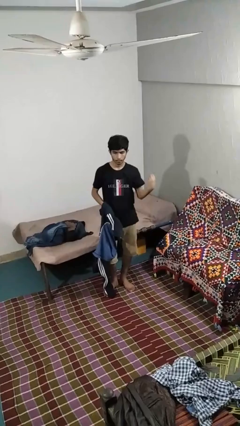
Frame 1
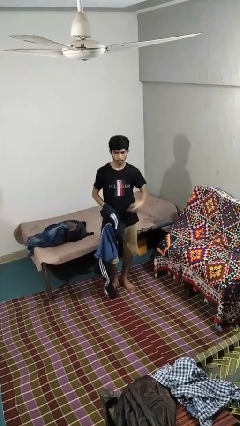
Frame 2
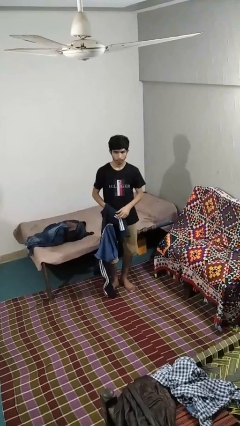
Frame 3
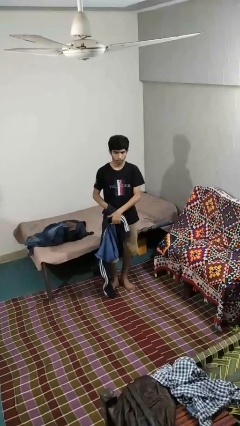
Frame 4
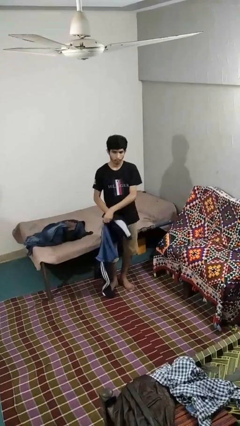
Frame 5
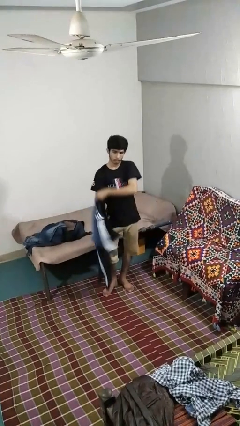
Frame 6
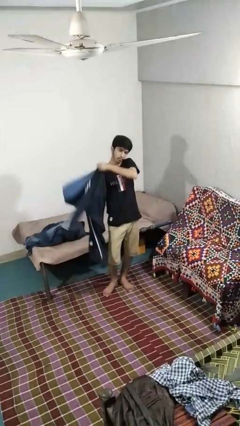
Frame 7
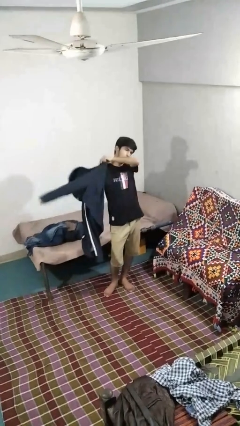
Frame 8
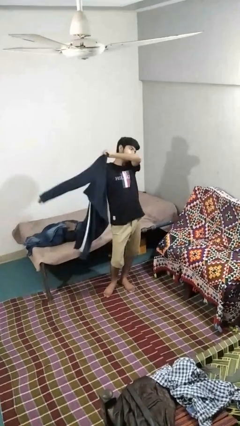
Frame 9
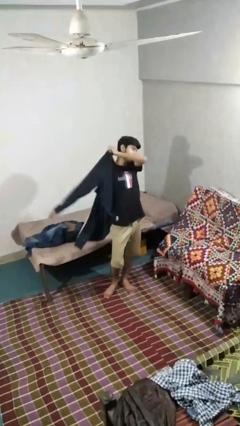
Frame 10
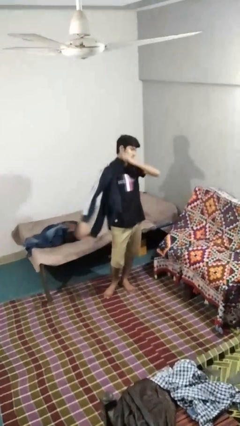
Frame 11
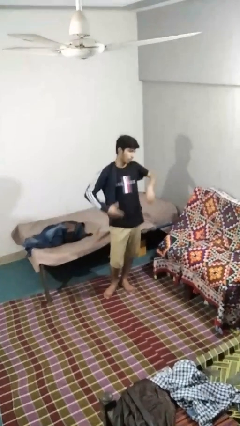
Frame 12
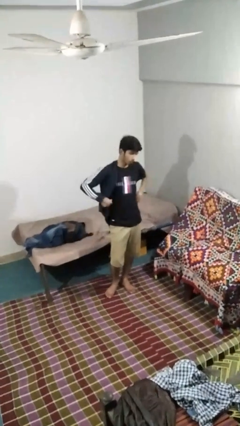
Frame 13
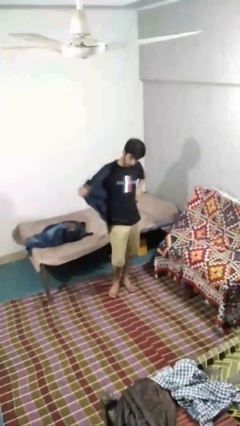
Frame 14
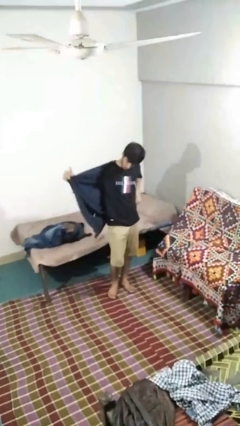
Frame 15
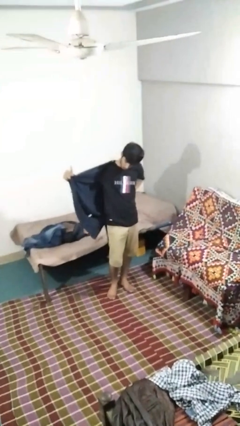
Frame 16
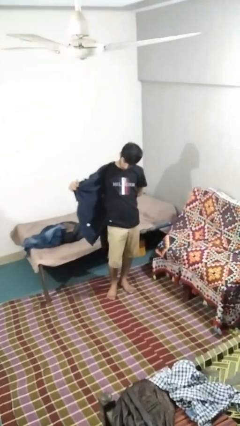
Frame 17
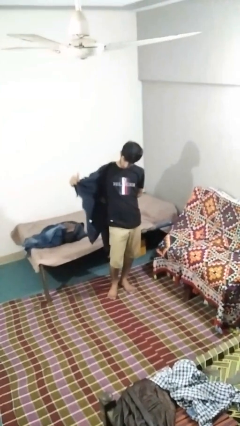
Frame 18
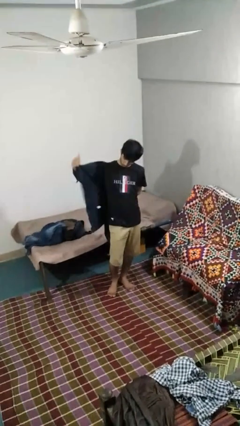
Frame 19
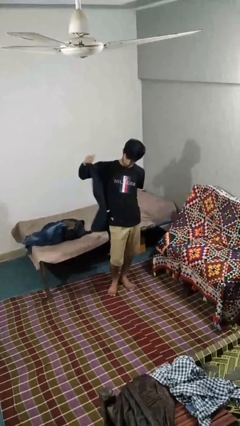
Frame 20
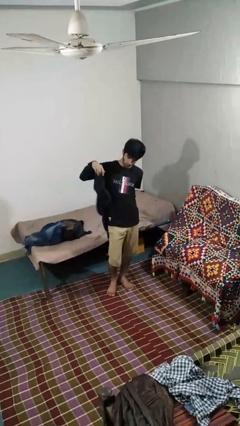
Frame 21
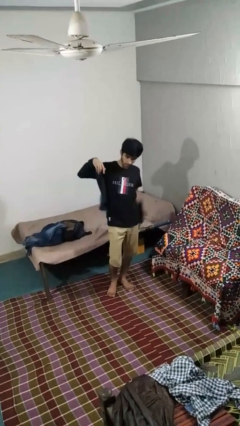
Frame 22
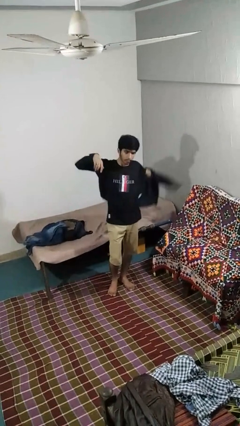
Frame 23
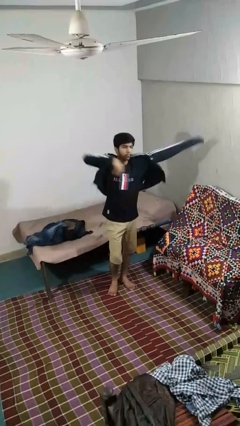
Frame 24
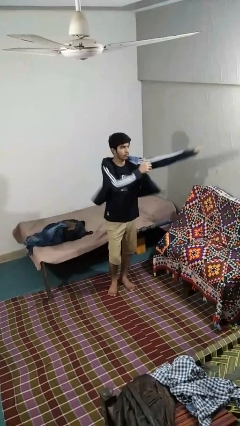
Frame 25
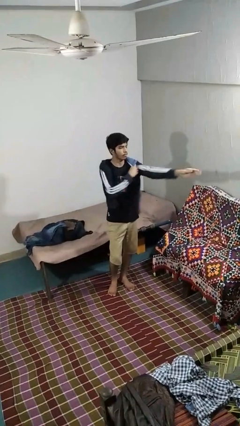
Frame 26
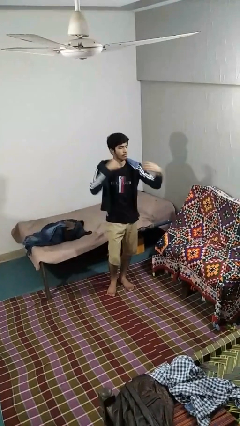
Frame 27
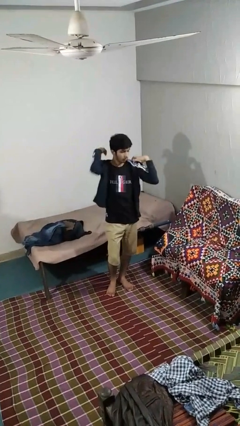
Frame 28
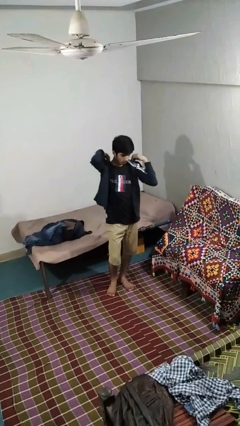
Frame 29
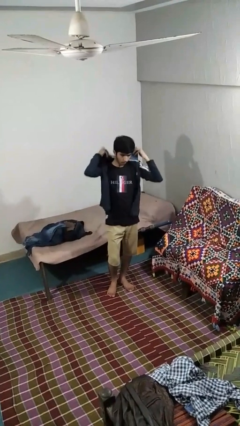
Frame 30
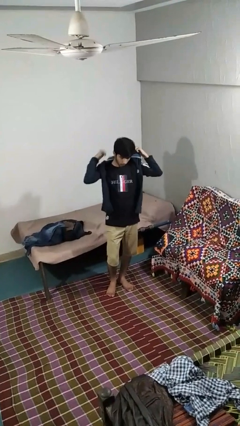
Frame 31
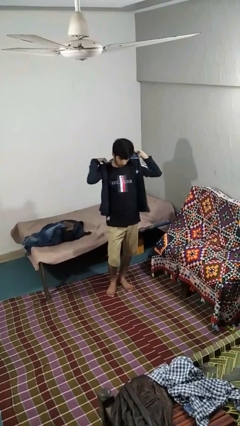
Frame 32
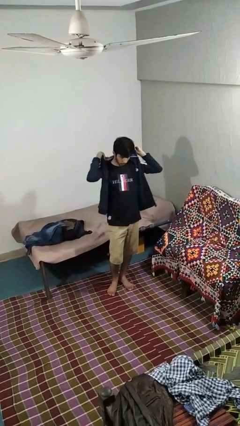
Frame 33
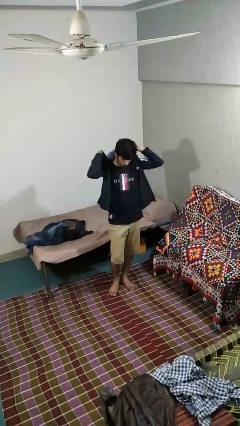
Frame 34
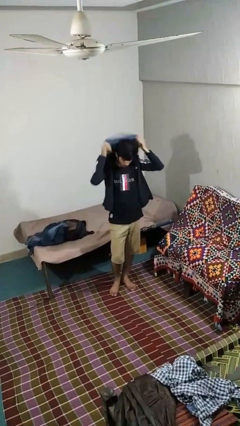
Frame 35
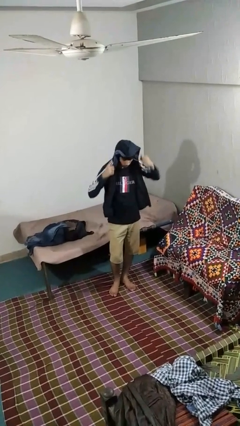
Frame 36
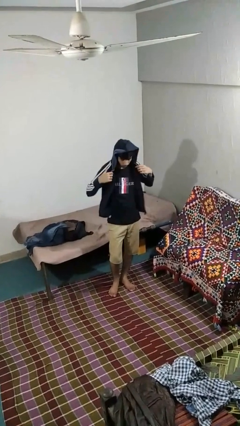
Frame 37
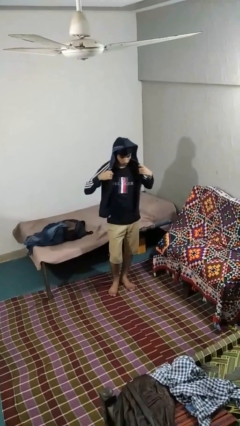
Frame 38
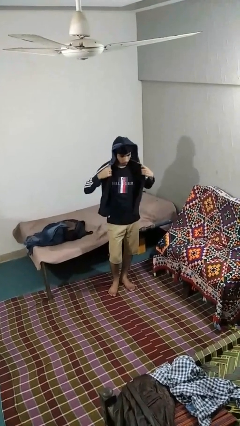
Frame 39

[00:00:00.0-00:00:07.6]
person puts on hoodie

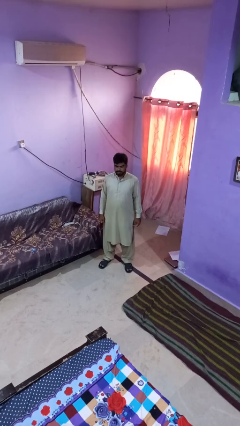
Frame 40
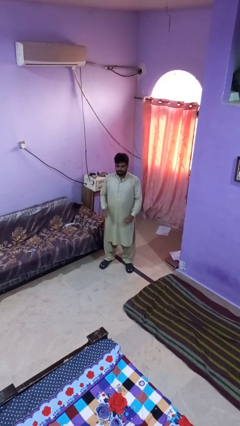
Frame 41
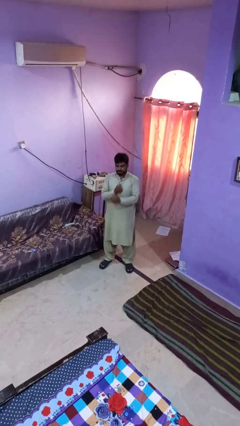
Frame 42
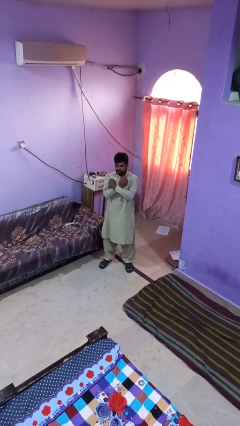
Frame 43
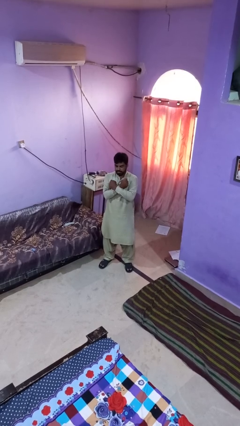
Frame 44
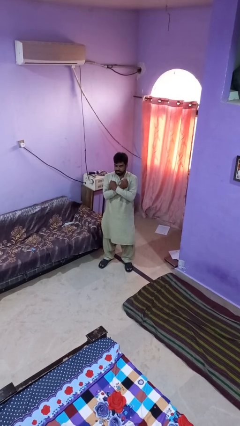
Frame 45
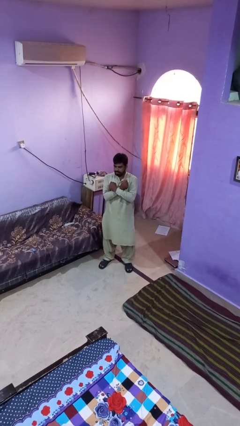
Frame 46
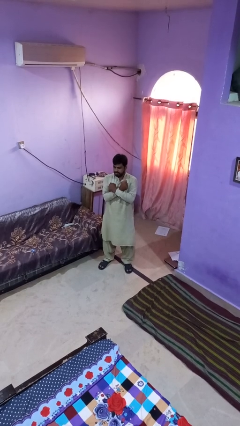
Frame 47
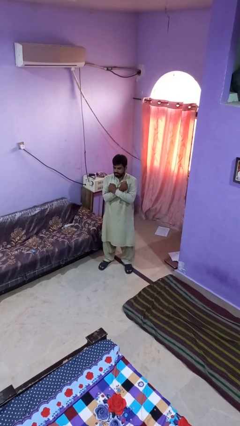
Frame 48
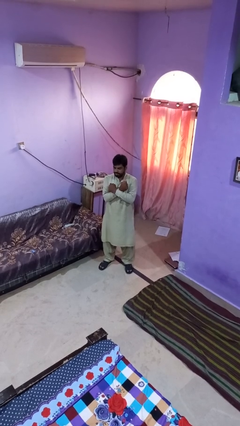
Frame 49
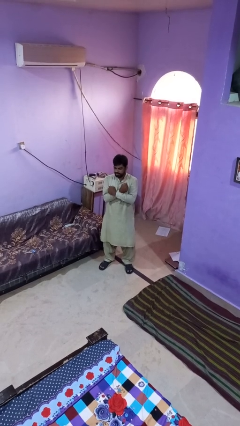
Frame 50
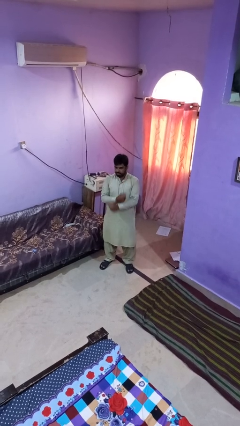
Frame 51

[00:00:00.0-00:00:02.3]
person gestures arms x

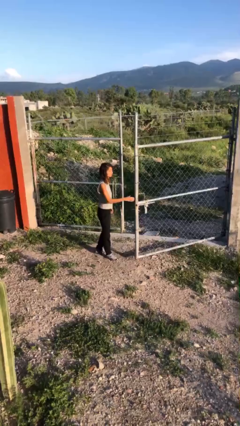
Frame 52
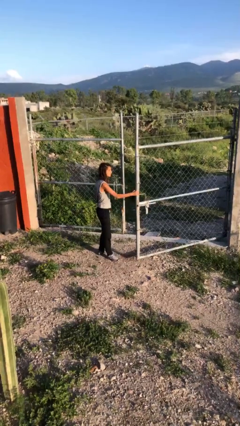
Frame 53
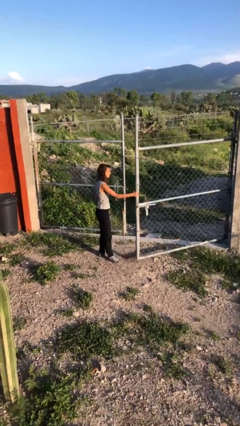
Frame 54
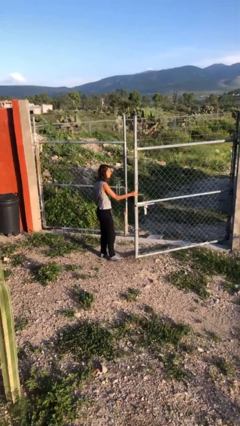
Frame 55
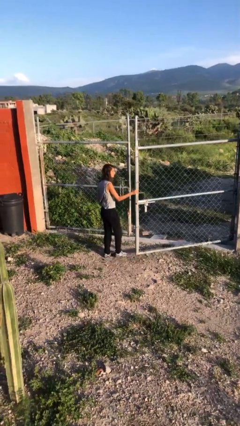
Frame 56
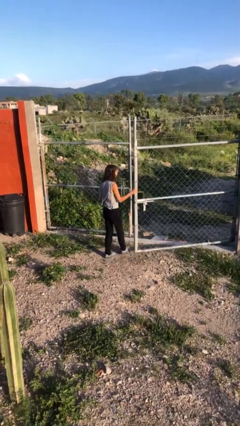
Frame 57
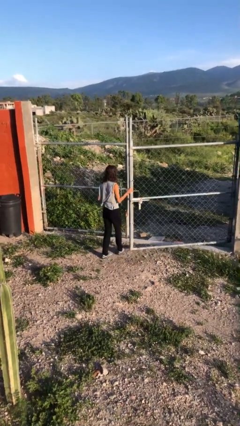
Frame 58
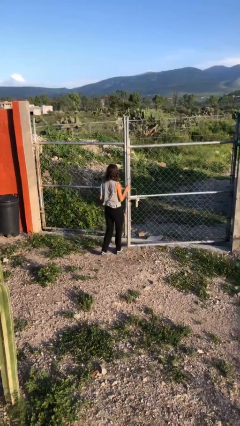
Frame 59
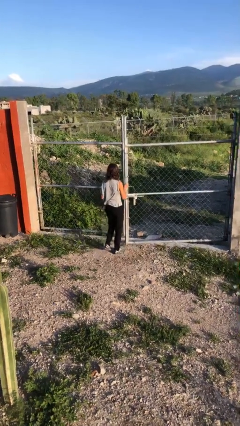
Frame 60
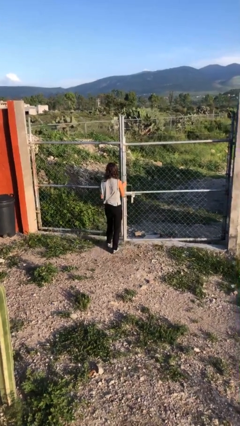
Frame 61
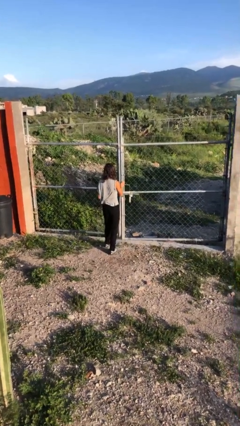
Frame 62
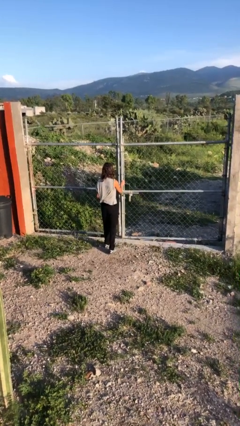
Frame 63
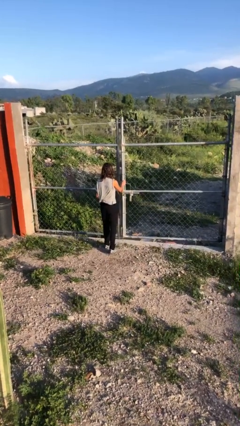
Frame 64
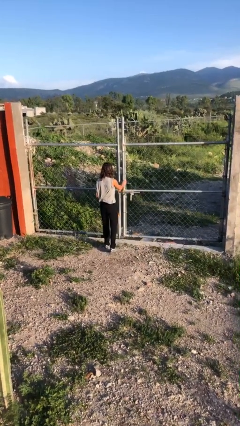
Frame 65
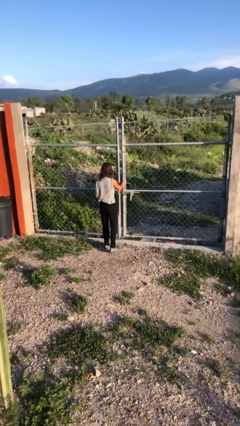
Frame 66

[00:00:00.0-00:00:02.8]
person closes gate

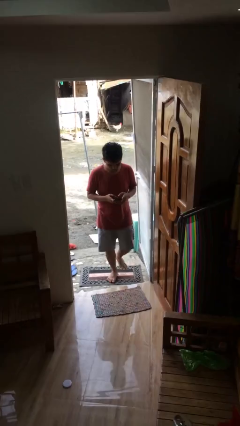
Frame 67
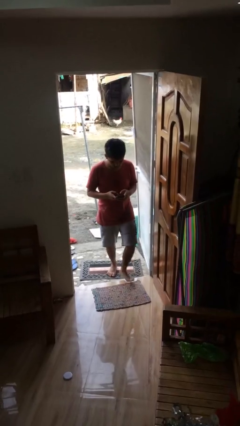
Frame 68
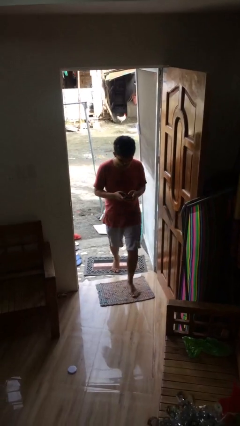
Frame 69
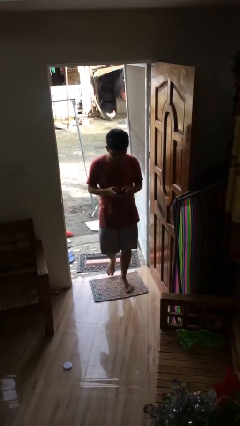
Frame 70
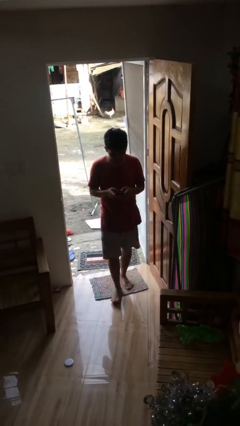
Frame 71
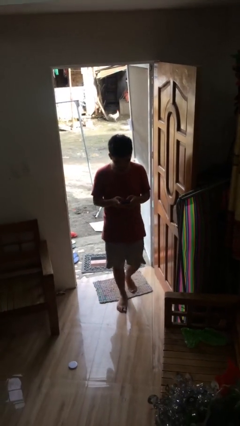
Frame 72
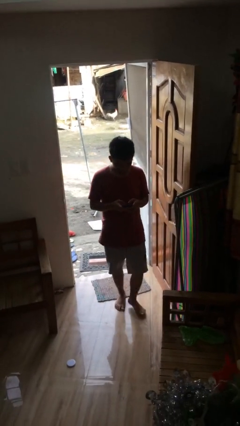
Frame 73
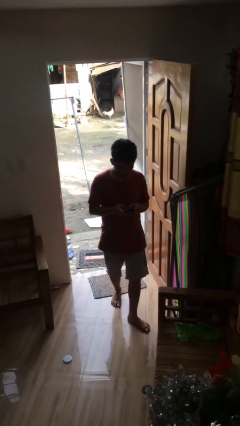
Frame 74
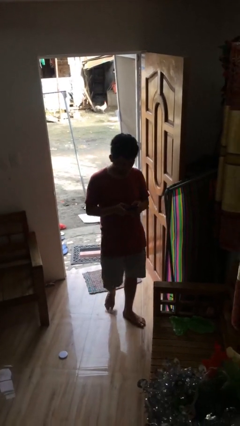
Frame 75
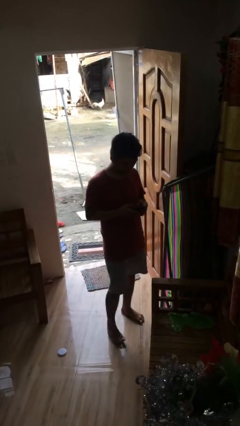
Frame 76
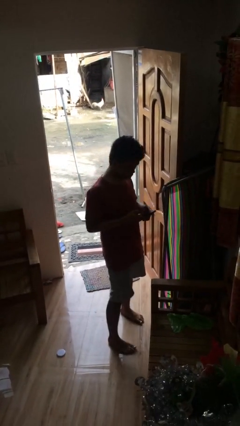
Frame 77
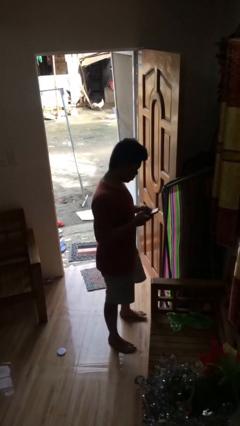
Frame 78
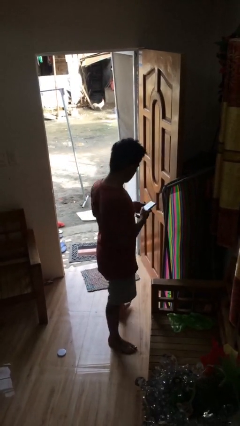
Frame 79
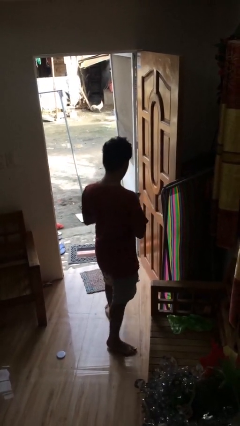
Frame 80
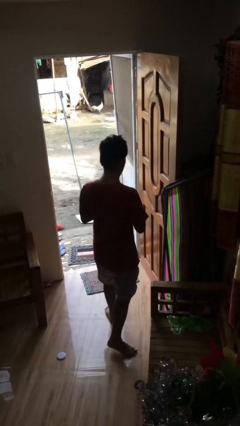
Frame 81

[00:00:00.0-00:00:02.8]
person enters scene through structure

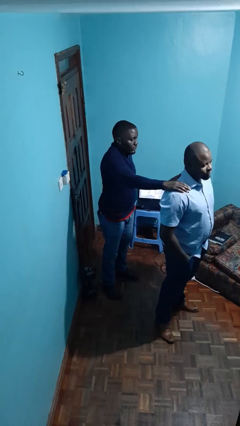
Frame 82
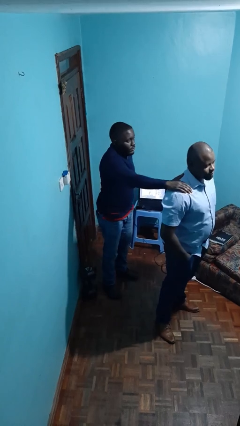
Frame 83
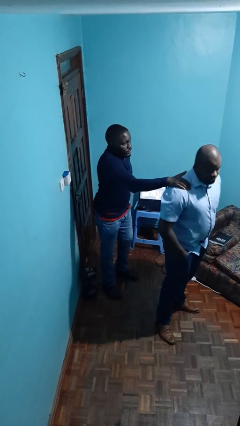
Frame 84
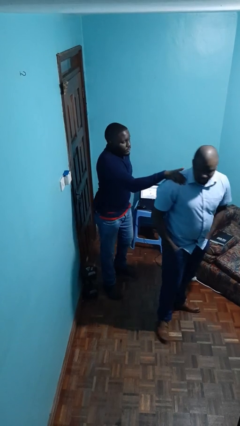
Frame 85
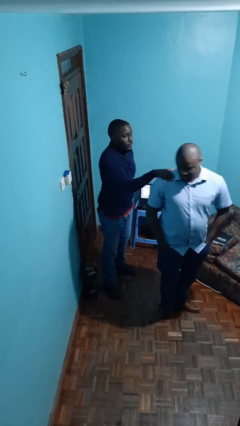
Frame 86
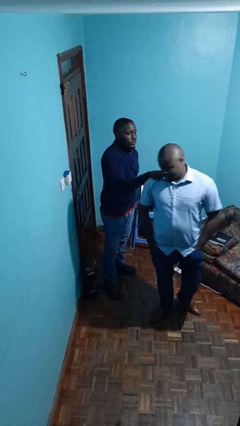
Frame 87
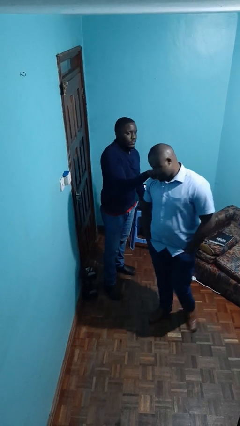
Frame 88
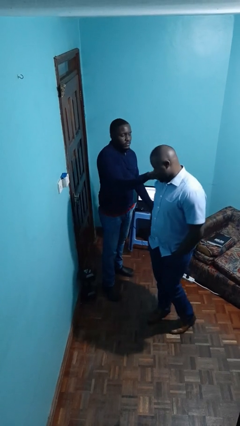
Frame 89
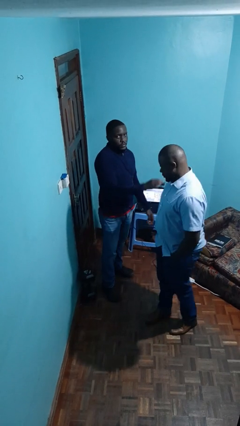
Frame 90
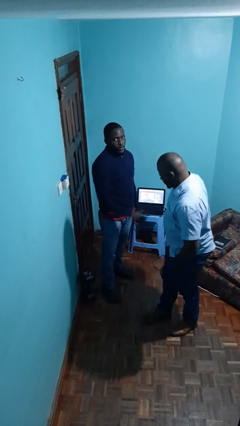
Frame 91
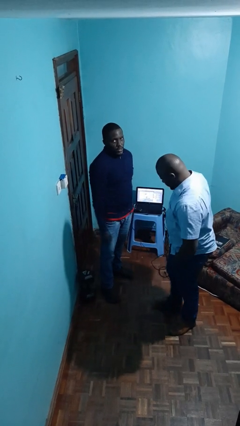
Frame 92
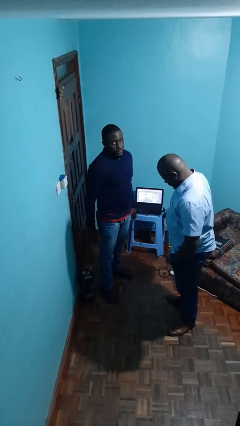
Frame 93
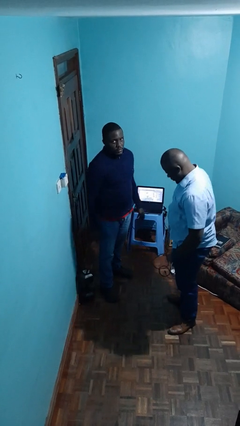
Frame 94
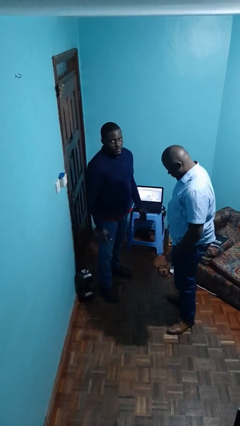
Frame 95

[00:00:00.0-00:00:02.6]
person spins person around
